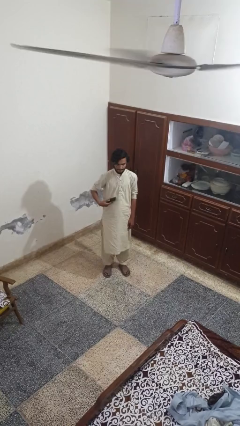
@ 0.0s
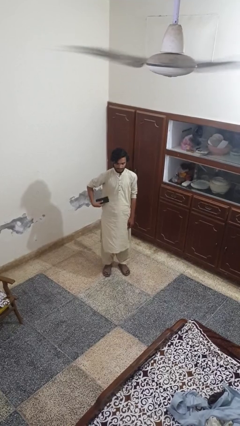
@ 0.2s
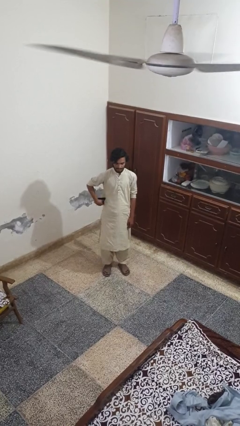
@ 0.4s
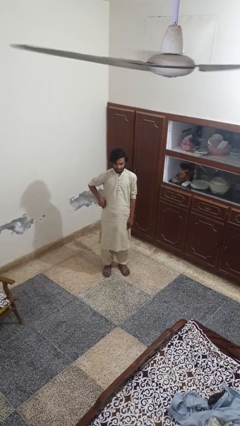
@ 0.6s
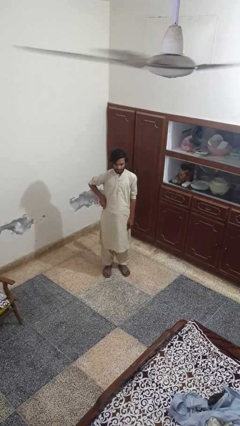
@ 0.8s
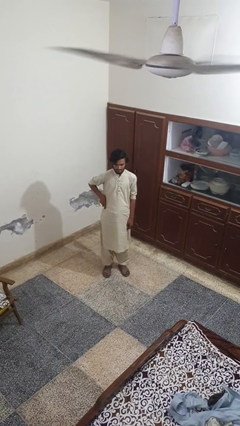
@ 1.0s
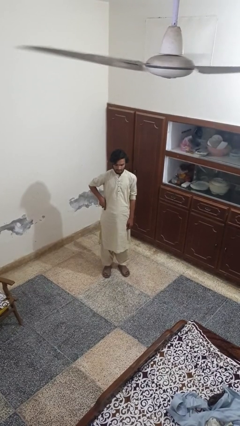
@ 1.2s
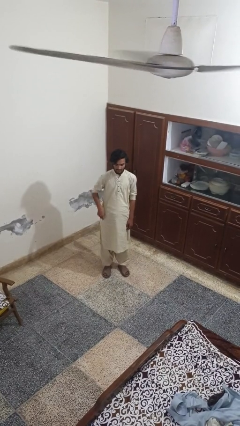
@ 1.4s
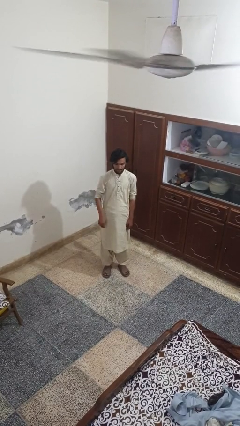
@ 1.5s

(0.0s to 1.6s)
person puts phone into pocket

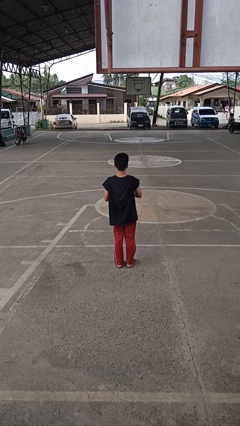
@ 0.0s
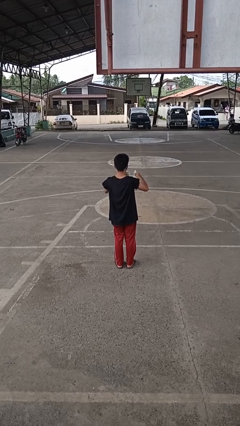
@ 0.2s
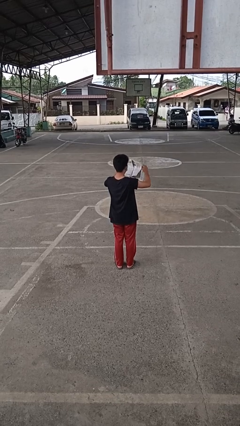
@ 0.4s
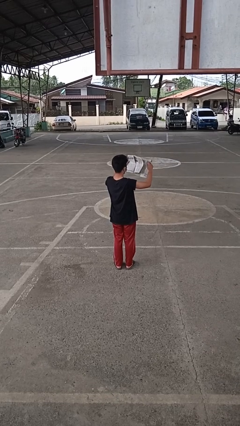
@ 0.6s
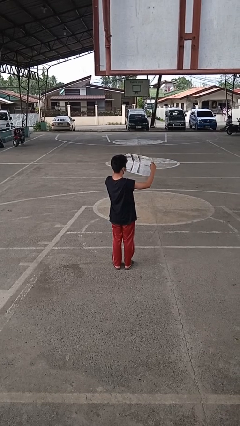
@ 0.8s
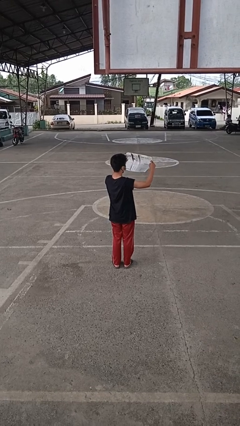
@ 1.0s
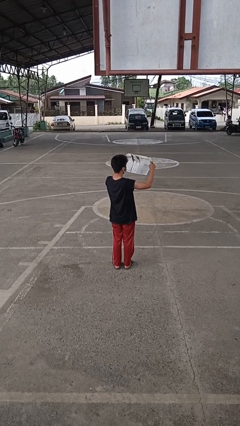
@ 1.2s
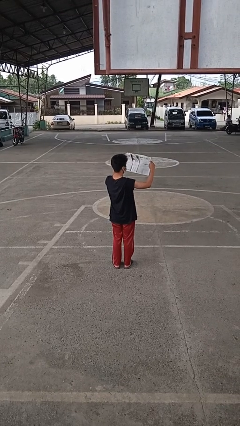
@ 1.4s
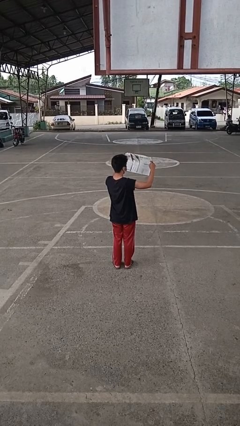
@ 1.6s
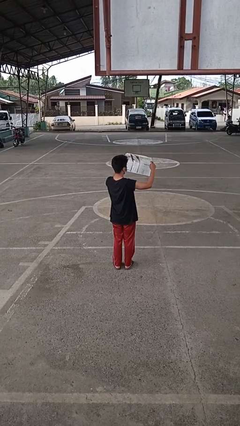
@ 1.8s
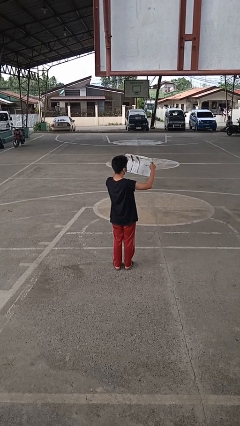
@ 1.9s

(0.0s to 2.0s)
person reads newspaper

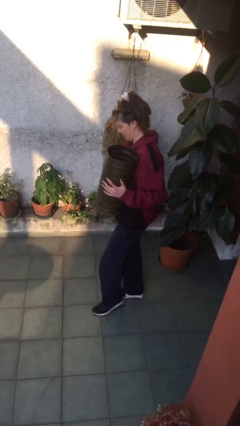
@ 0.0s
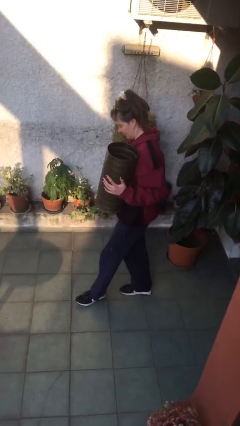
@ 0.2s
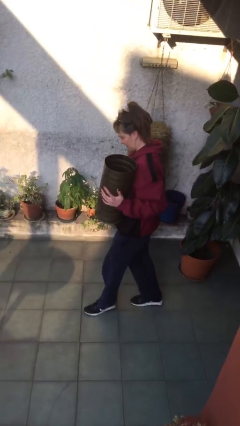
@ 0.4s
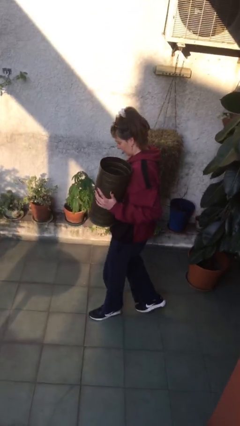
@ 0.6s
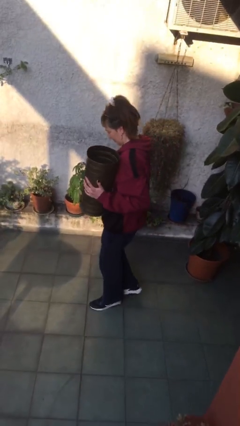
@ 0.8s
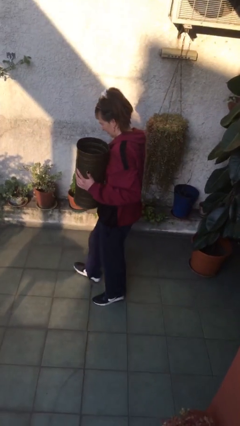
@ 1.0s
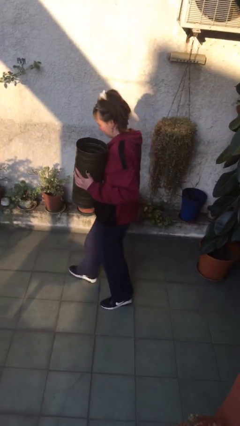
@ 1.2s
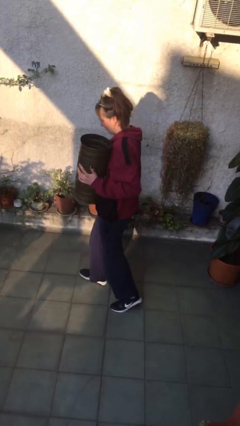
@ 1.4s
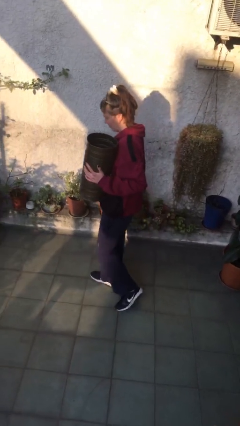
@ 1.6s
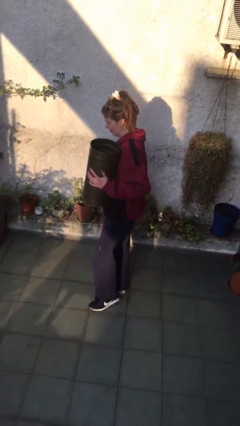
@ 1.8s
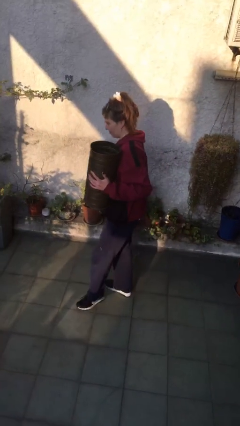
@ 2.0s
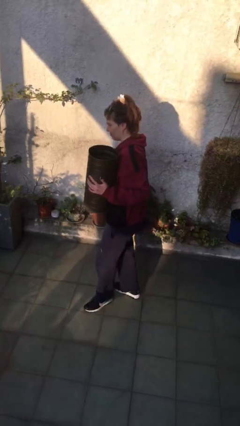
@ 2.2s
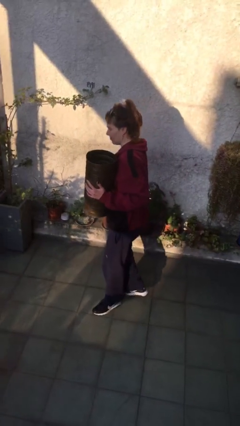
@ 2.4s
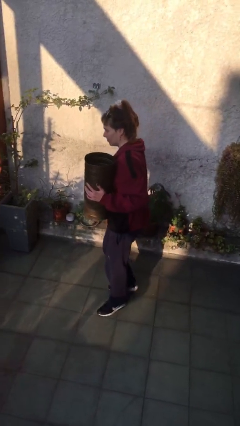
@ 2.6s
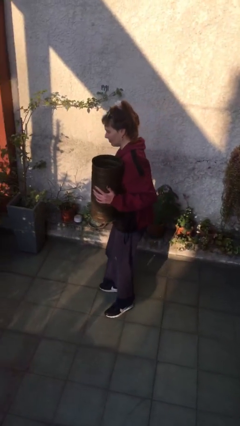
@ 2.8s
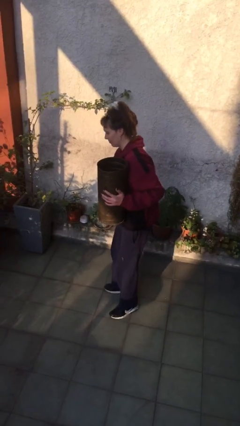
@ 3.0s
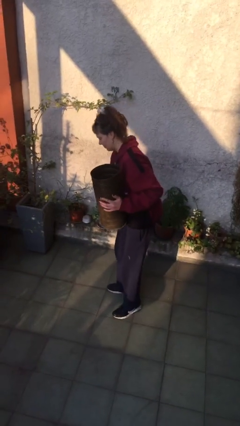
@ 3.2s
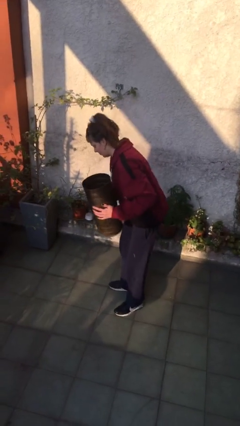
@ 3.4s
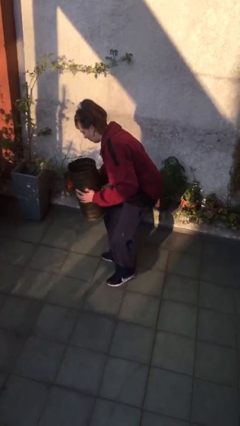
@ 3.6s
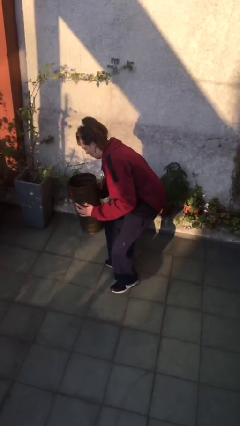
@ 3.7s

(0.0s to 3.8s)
person carries heavy object

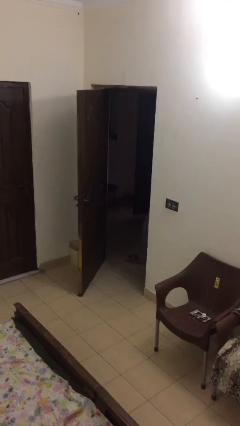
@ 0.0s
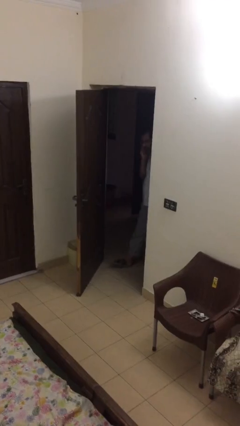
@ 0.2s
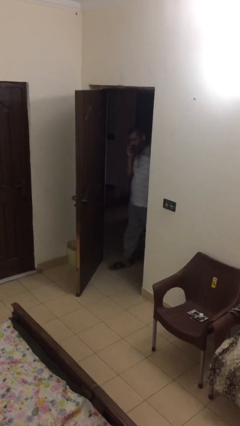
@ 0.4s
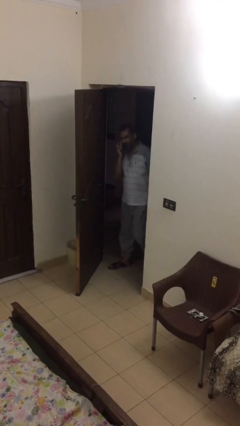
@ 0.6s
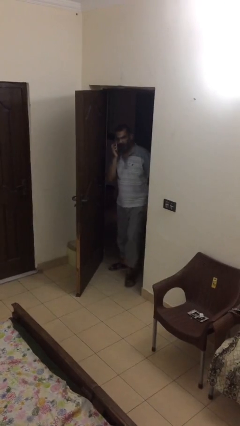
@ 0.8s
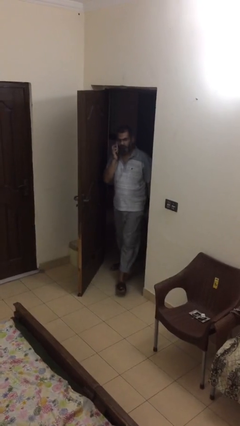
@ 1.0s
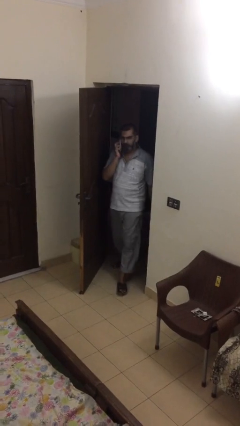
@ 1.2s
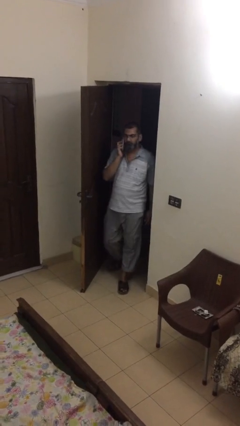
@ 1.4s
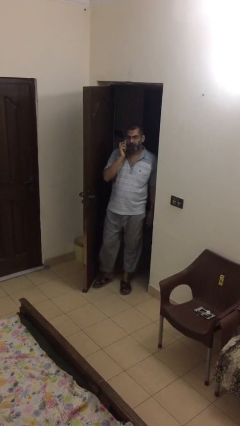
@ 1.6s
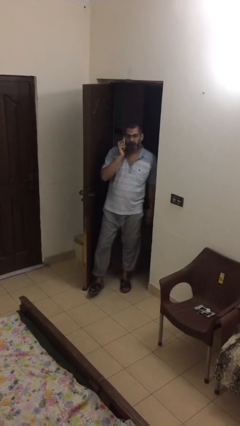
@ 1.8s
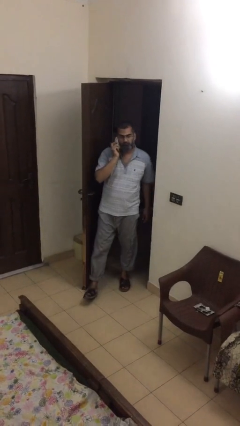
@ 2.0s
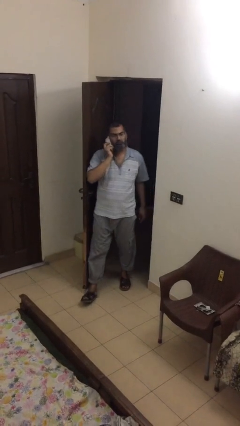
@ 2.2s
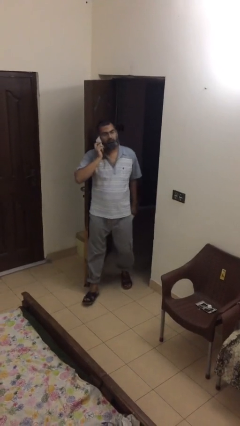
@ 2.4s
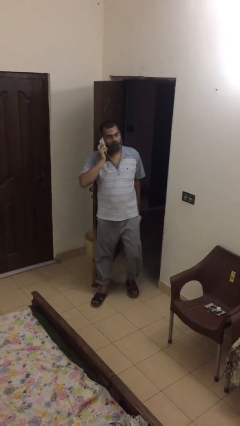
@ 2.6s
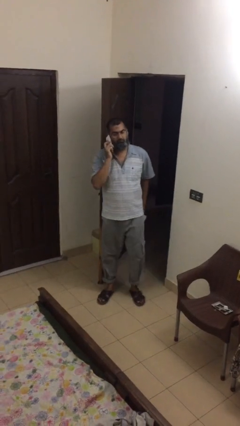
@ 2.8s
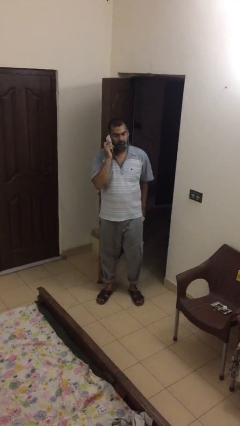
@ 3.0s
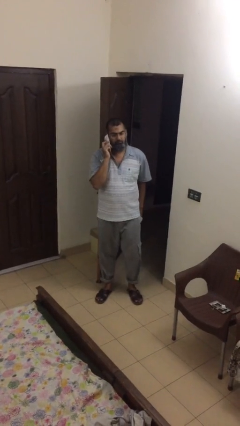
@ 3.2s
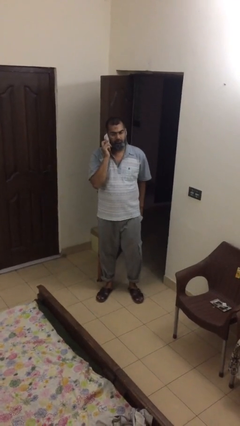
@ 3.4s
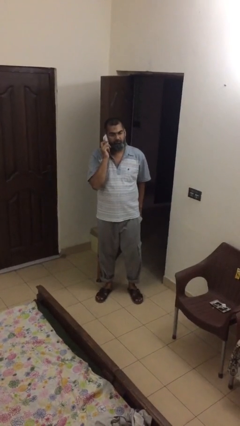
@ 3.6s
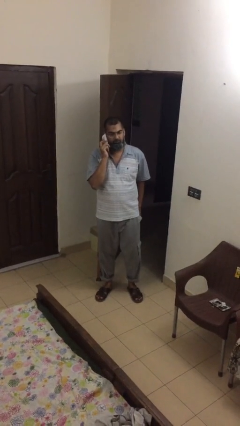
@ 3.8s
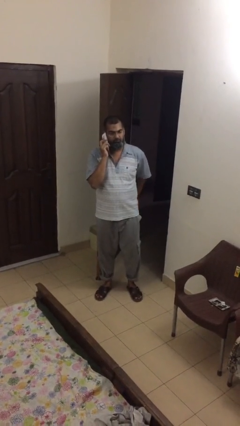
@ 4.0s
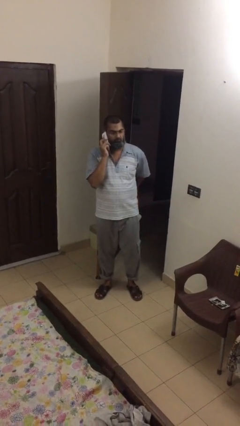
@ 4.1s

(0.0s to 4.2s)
person enters scene through structure

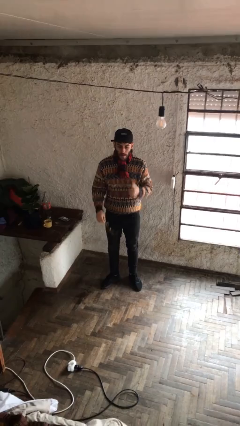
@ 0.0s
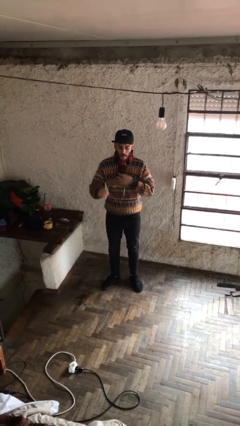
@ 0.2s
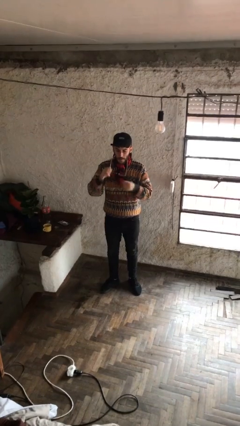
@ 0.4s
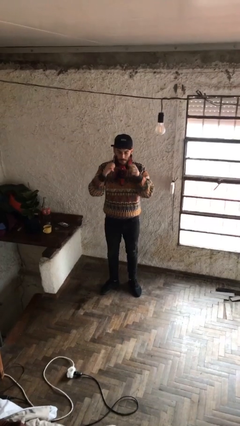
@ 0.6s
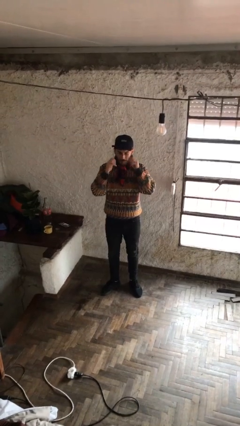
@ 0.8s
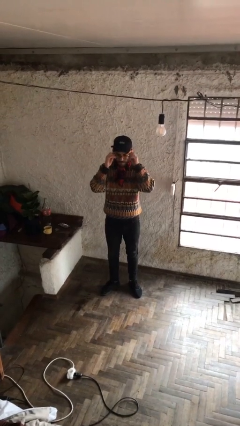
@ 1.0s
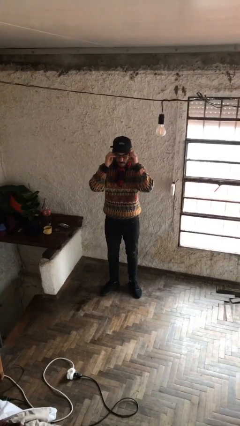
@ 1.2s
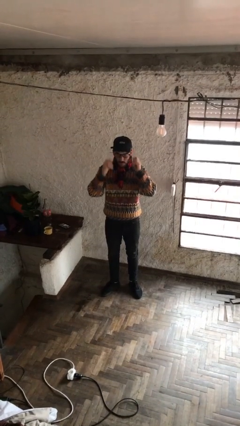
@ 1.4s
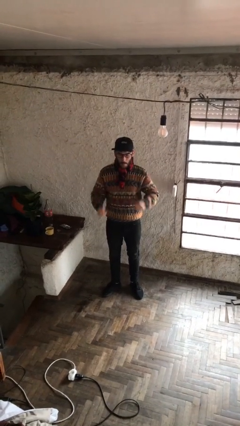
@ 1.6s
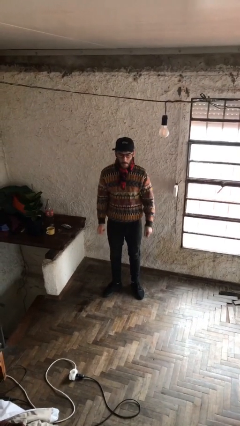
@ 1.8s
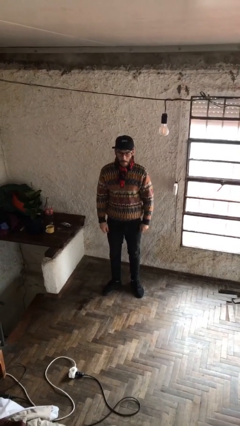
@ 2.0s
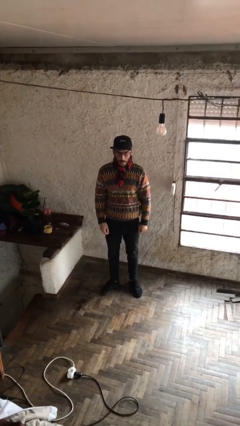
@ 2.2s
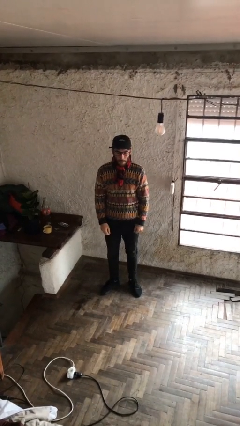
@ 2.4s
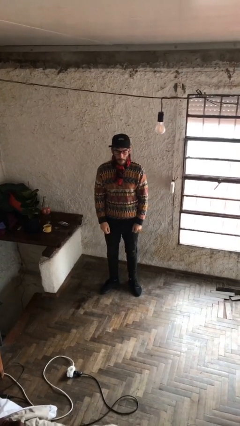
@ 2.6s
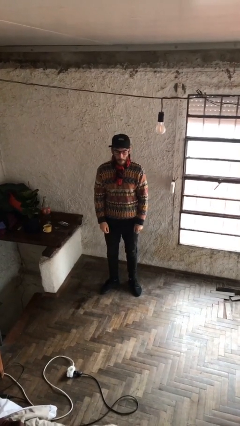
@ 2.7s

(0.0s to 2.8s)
person puts on glasses

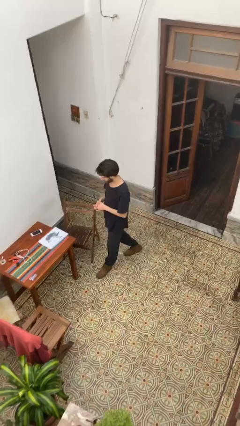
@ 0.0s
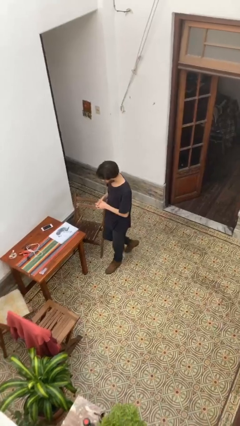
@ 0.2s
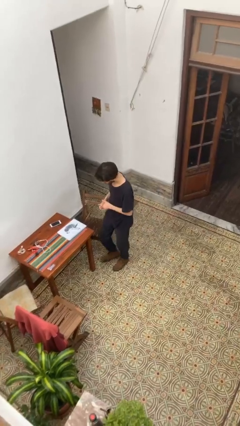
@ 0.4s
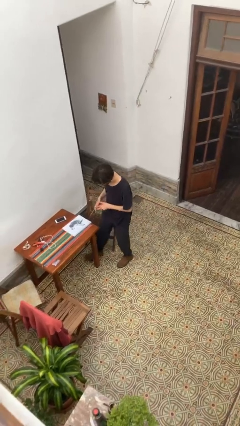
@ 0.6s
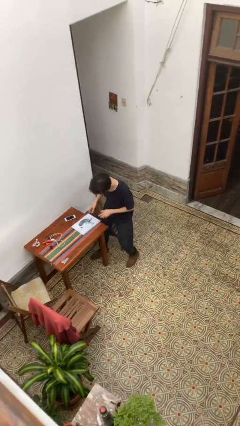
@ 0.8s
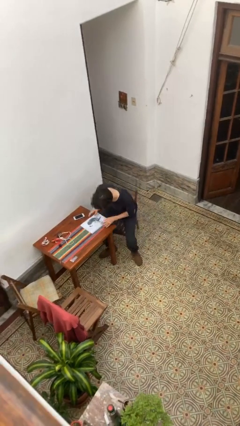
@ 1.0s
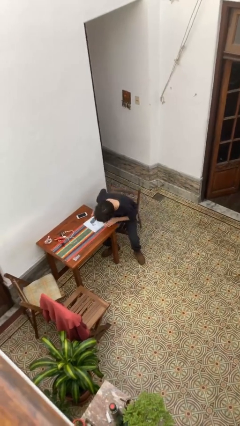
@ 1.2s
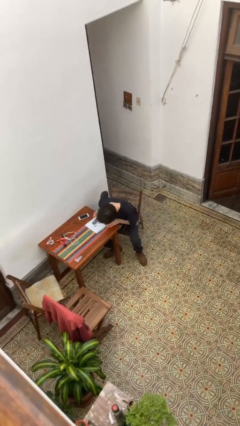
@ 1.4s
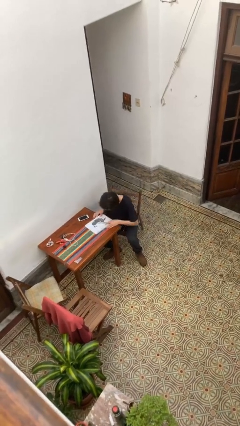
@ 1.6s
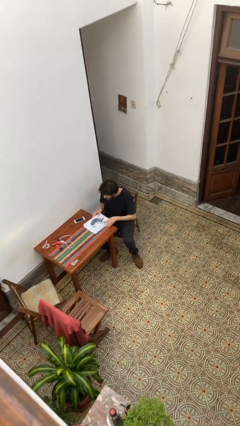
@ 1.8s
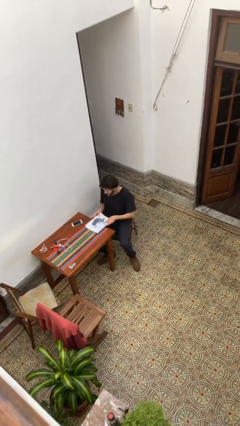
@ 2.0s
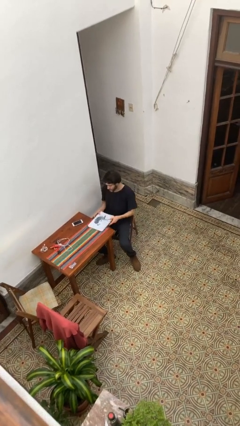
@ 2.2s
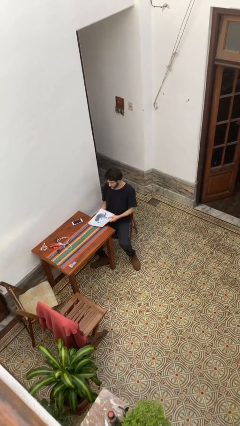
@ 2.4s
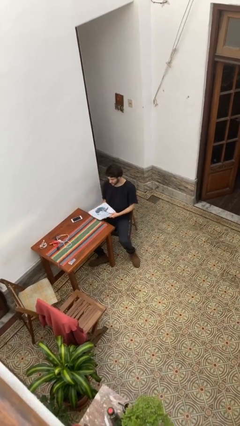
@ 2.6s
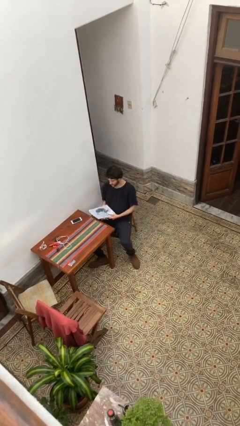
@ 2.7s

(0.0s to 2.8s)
person sits down

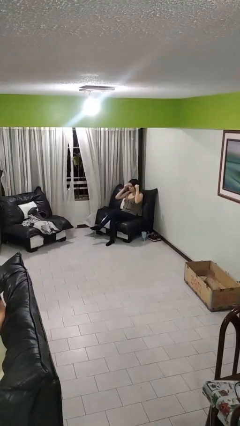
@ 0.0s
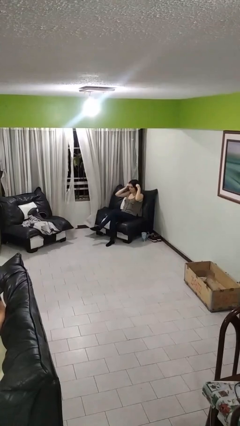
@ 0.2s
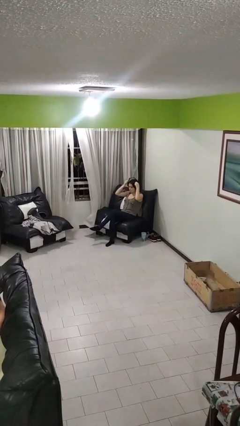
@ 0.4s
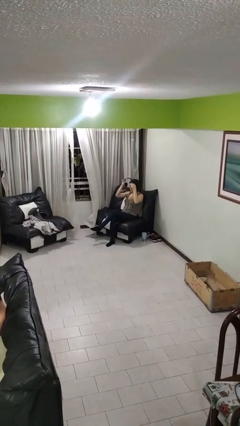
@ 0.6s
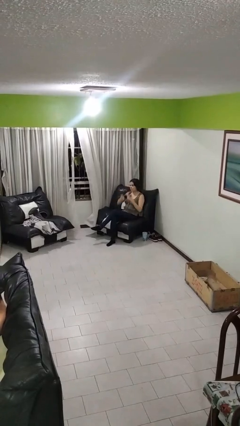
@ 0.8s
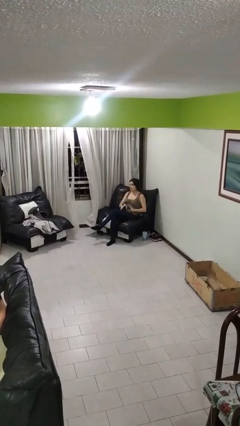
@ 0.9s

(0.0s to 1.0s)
person takes off headphones
